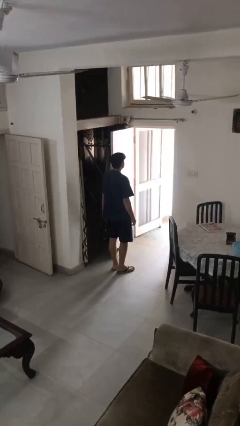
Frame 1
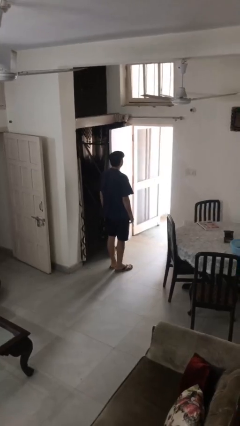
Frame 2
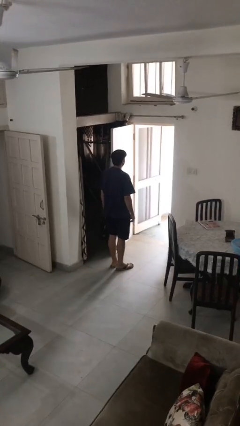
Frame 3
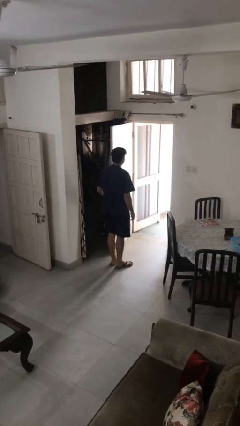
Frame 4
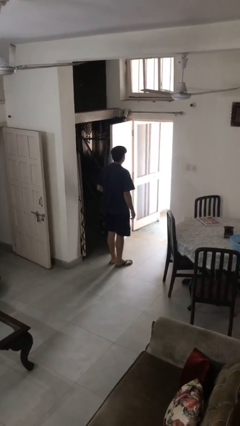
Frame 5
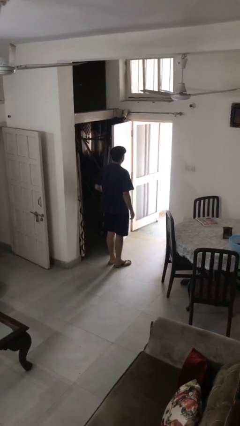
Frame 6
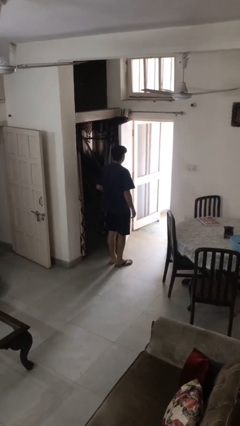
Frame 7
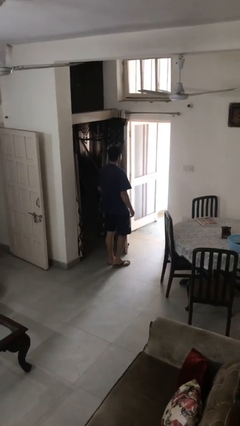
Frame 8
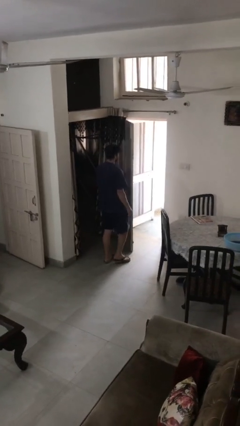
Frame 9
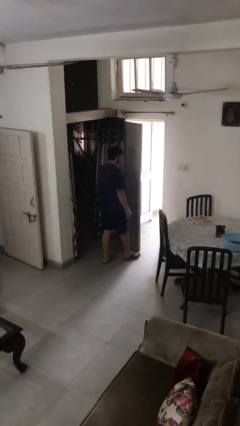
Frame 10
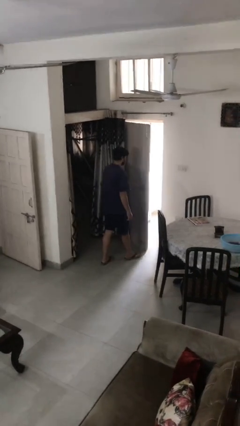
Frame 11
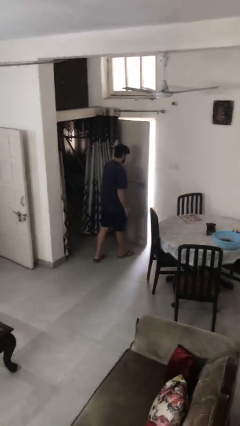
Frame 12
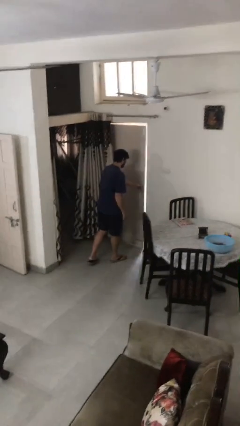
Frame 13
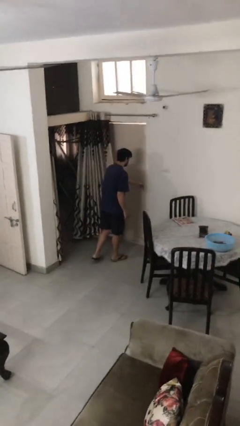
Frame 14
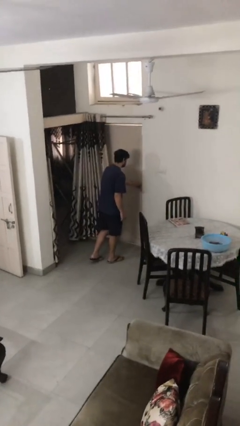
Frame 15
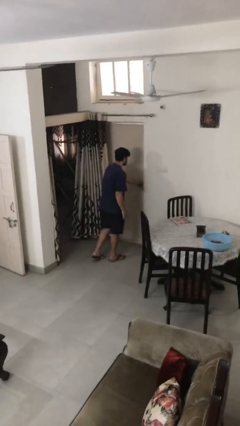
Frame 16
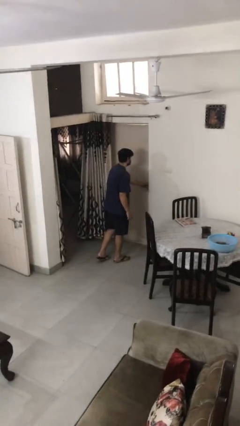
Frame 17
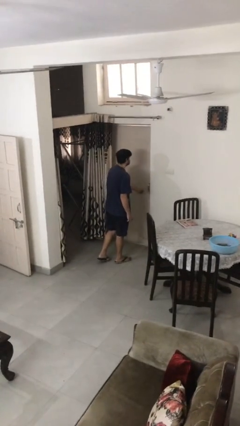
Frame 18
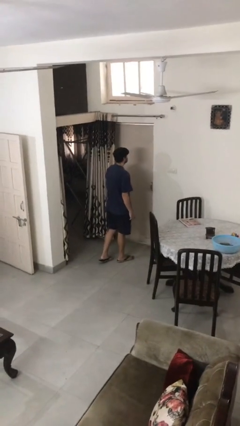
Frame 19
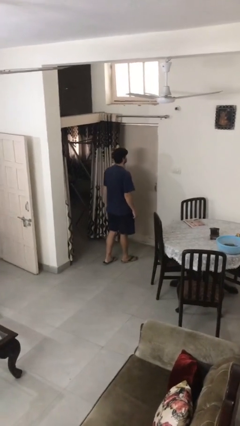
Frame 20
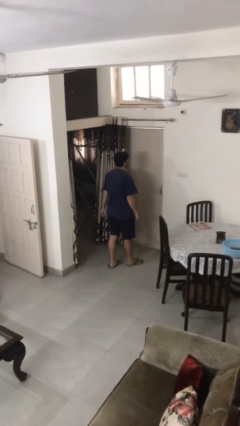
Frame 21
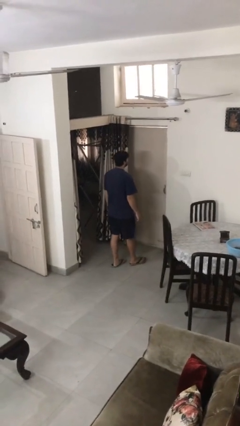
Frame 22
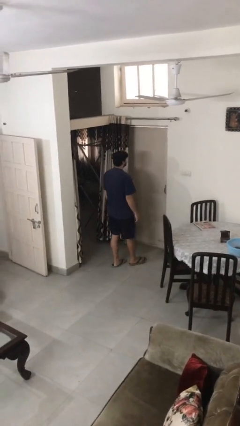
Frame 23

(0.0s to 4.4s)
person closes facility door

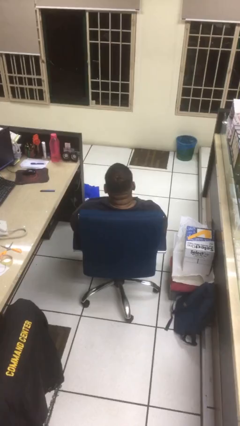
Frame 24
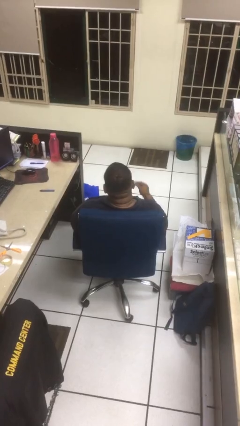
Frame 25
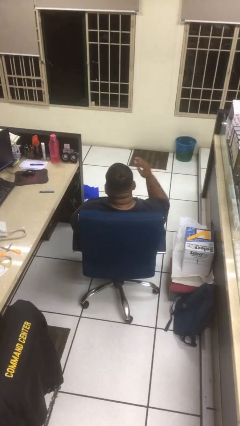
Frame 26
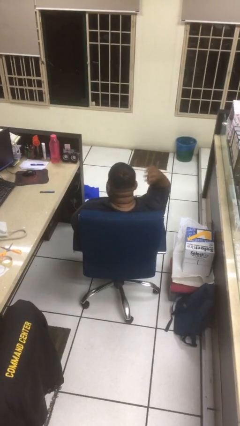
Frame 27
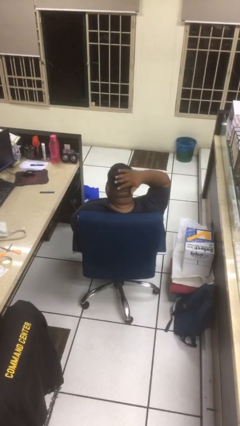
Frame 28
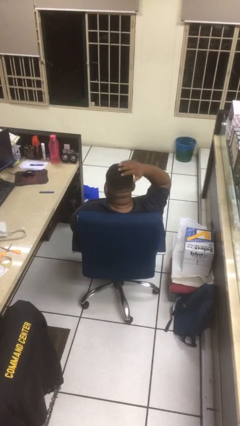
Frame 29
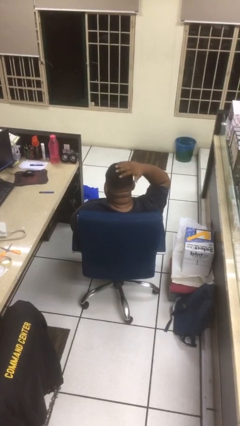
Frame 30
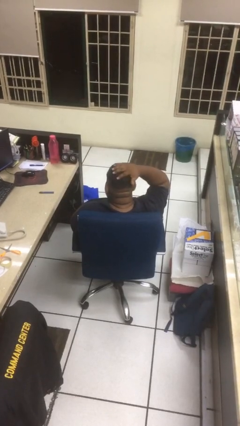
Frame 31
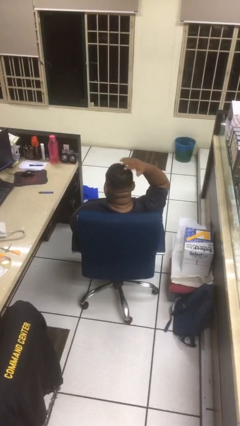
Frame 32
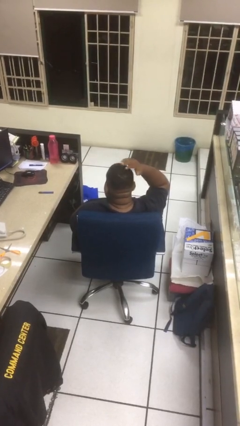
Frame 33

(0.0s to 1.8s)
person pats head

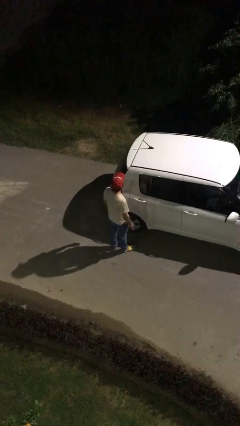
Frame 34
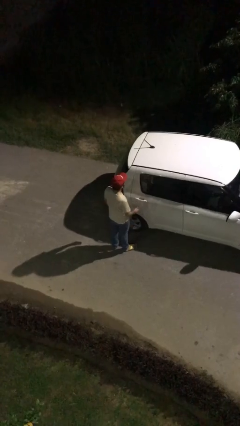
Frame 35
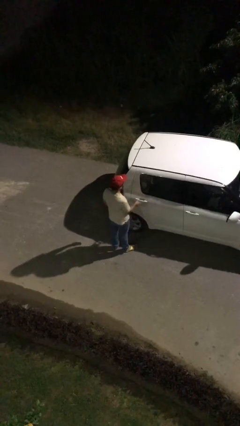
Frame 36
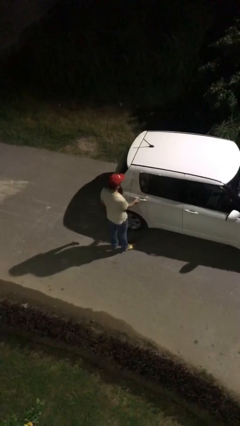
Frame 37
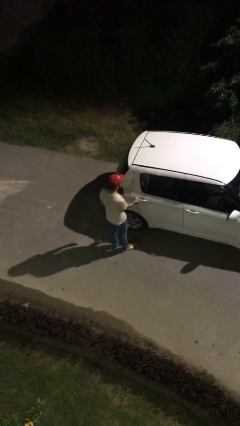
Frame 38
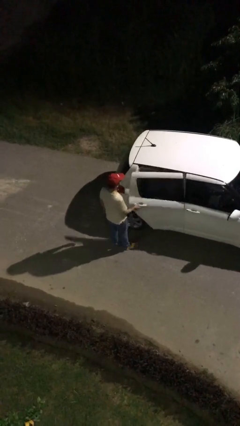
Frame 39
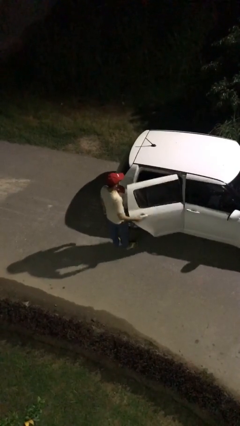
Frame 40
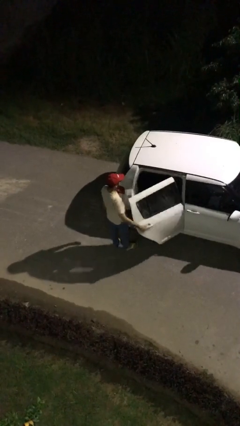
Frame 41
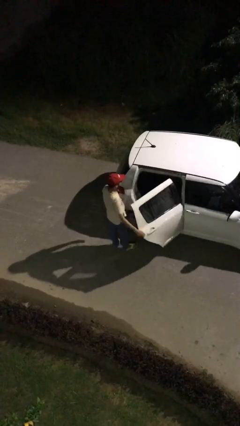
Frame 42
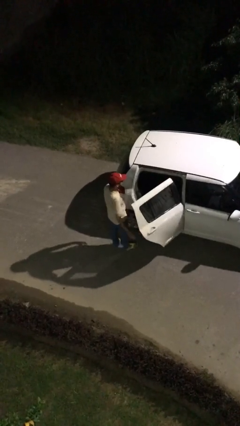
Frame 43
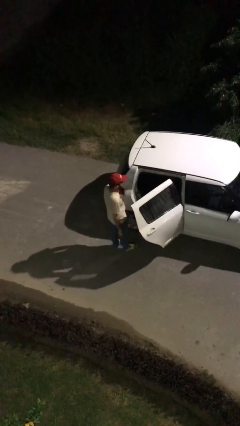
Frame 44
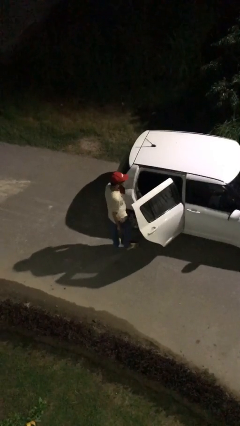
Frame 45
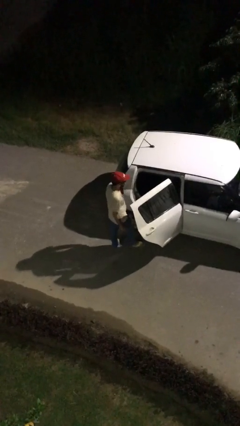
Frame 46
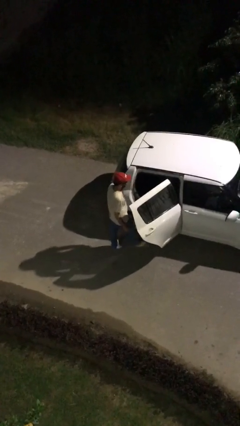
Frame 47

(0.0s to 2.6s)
person opens car door

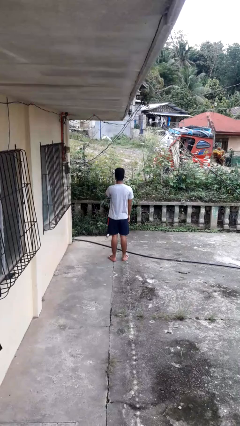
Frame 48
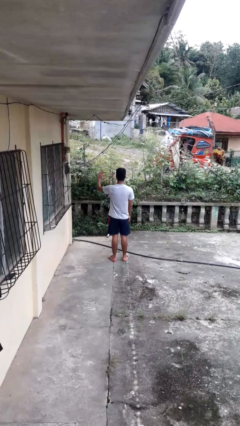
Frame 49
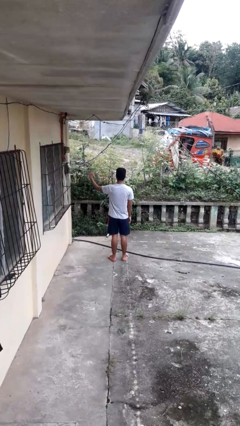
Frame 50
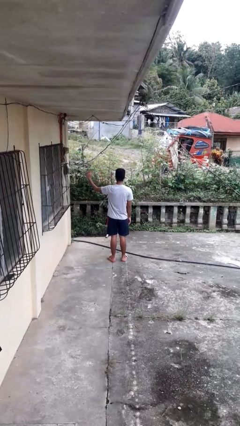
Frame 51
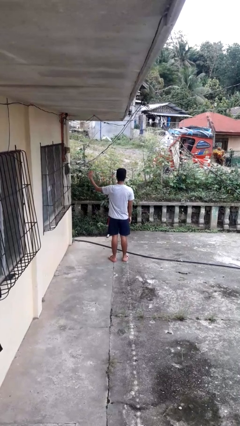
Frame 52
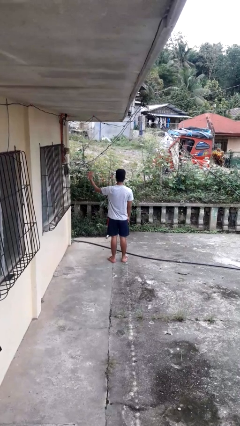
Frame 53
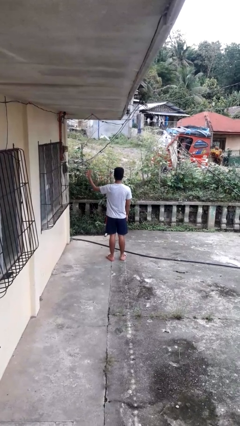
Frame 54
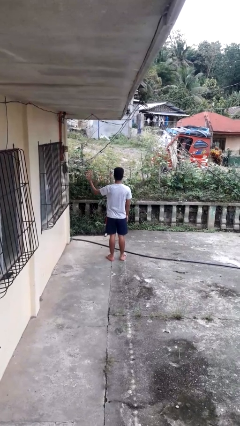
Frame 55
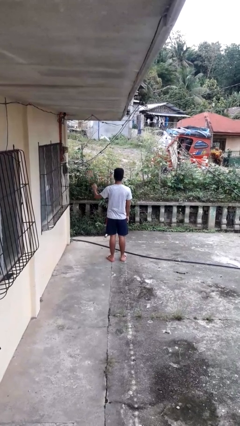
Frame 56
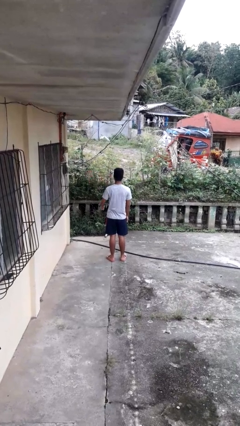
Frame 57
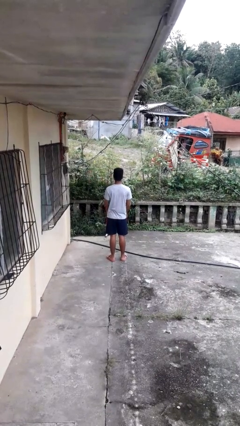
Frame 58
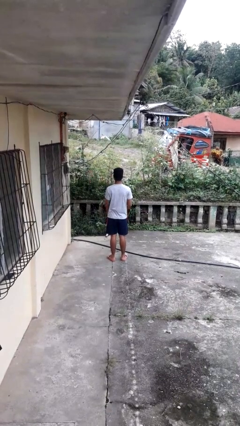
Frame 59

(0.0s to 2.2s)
person gestures swipe left

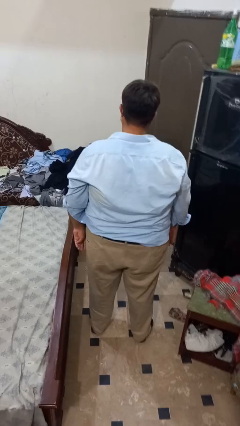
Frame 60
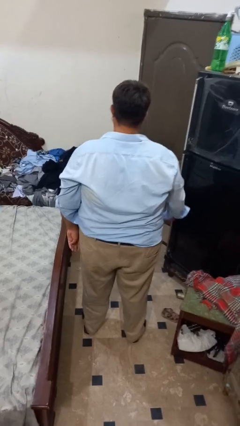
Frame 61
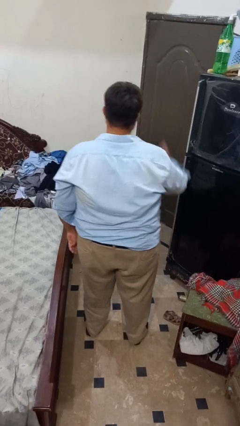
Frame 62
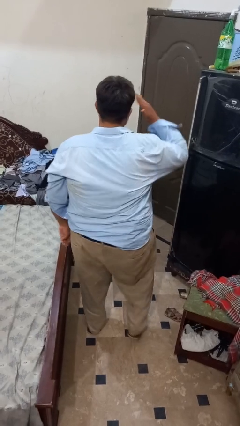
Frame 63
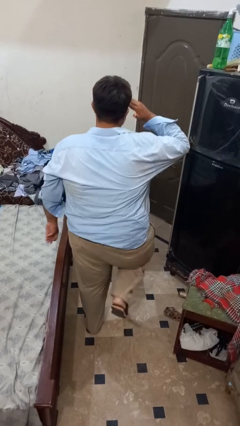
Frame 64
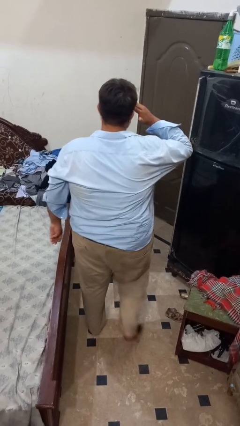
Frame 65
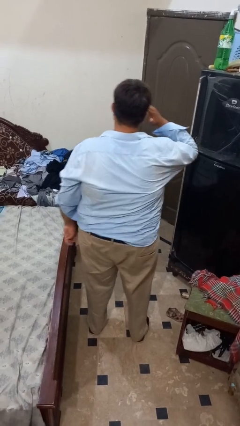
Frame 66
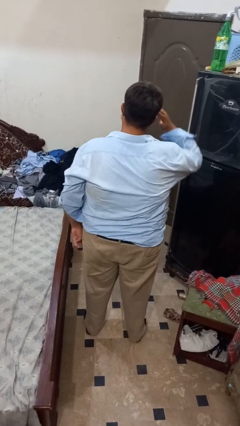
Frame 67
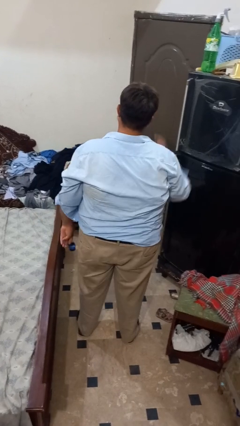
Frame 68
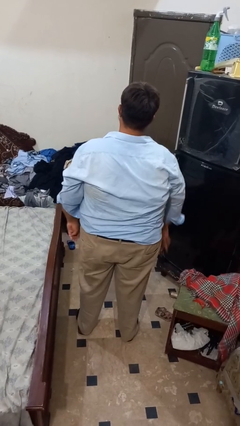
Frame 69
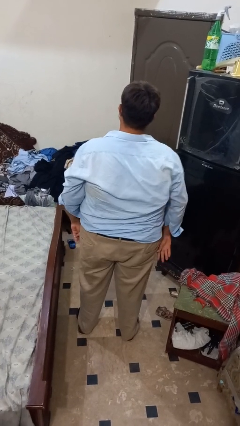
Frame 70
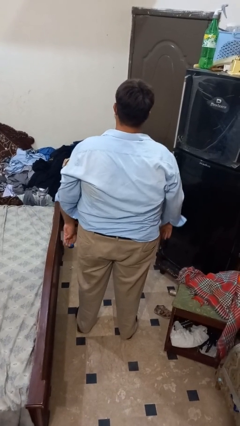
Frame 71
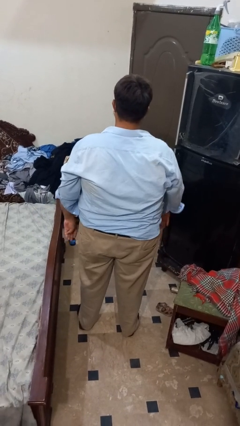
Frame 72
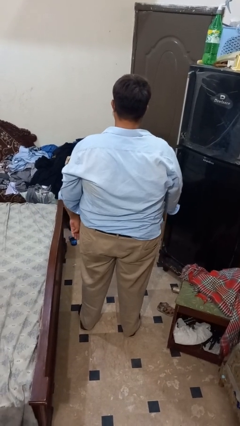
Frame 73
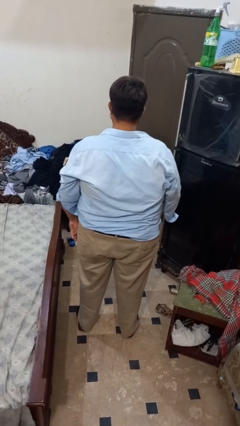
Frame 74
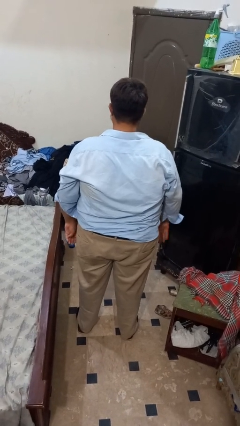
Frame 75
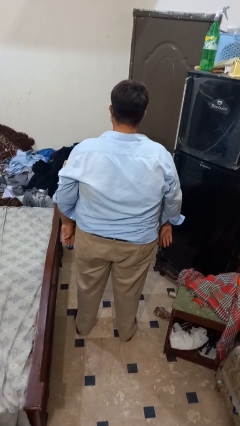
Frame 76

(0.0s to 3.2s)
person salutes

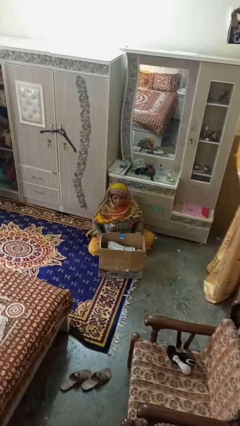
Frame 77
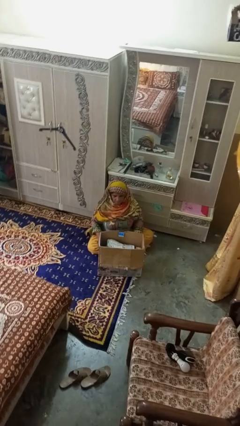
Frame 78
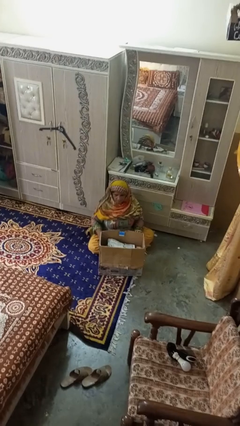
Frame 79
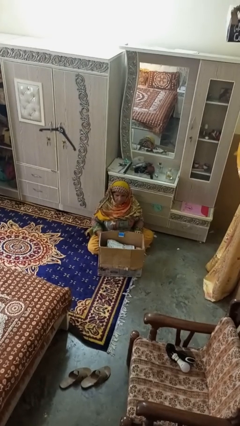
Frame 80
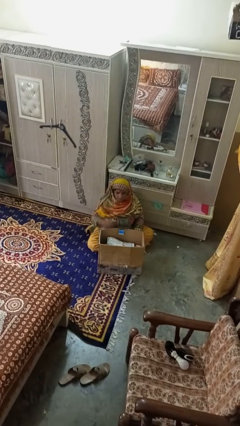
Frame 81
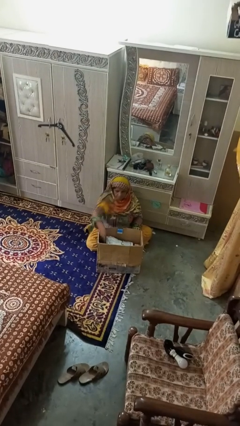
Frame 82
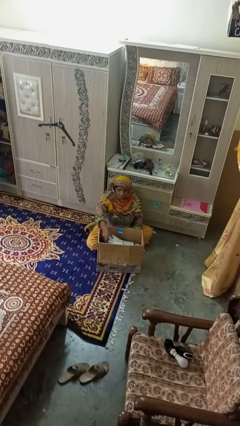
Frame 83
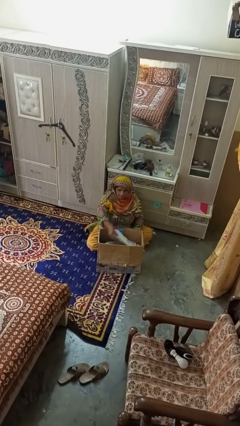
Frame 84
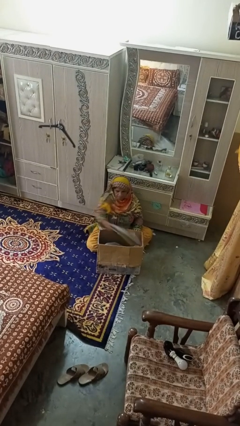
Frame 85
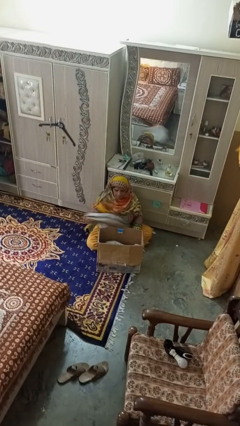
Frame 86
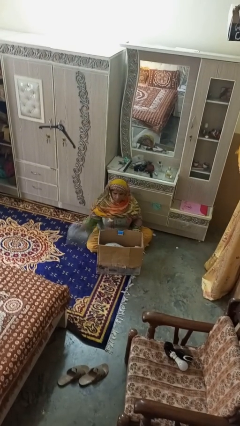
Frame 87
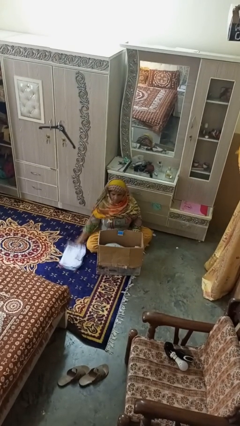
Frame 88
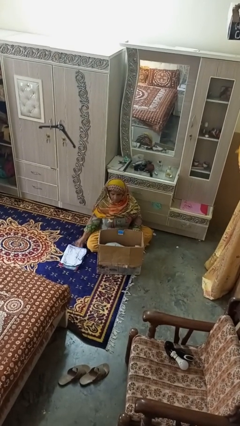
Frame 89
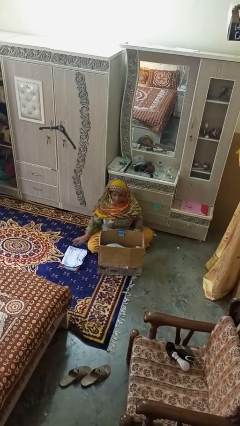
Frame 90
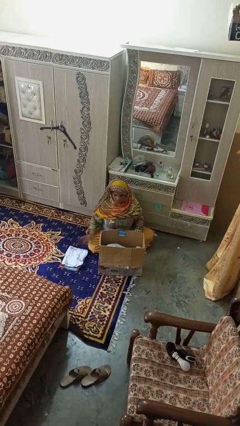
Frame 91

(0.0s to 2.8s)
person takes object from box

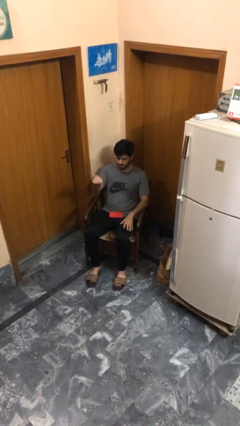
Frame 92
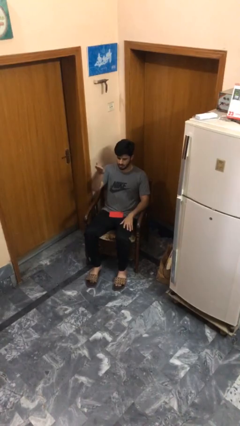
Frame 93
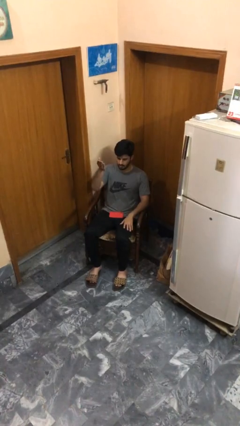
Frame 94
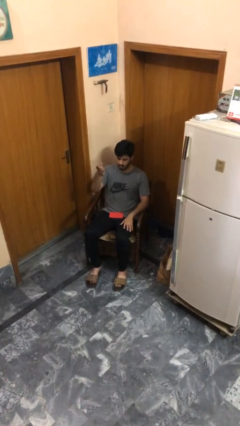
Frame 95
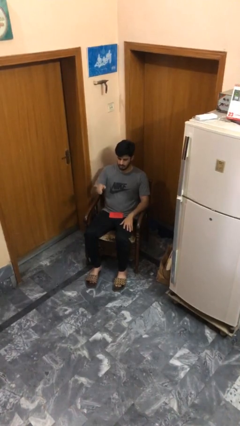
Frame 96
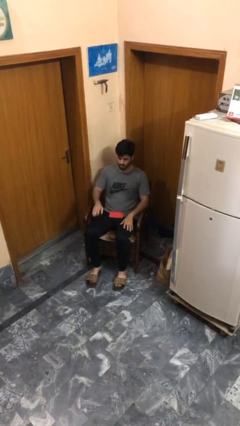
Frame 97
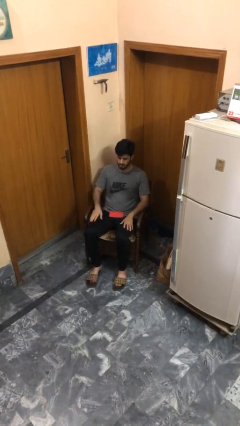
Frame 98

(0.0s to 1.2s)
person gestures swipe up
